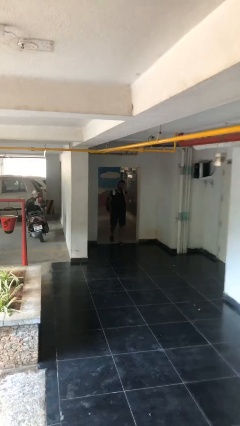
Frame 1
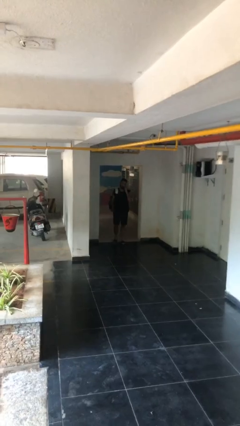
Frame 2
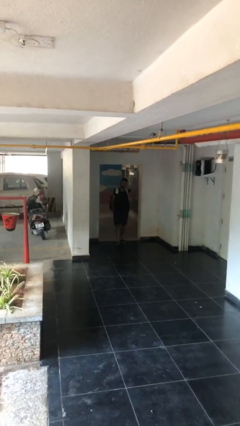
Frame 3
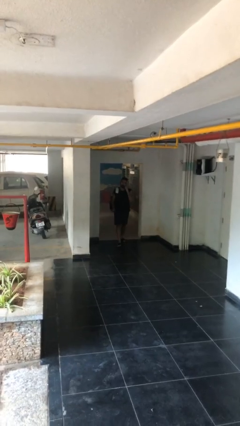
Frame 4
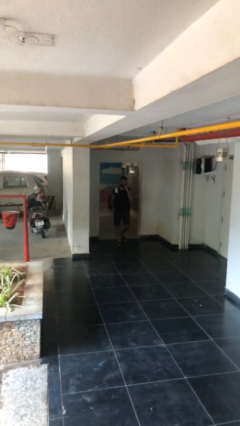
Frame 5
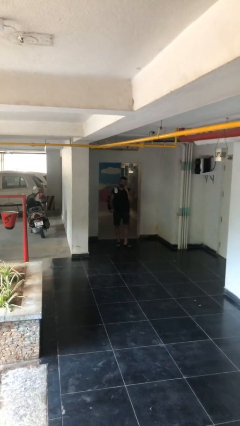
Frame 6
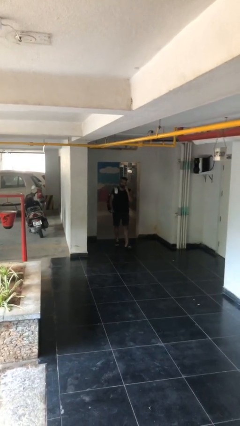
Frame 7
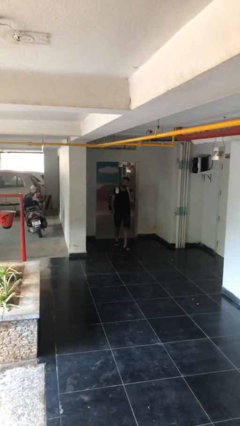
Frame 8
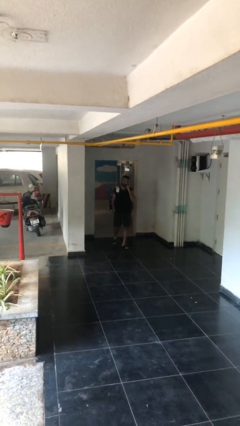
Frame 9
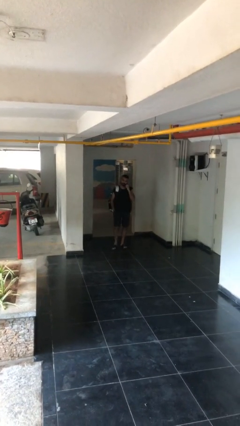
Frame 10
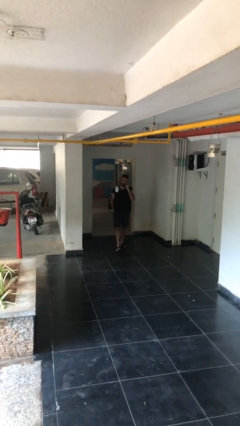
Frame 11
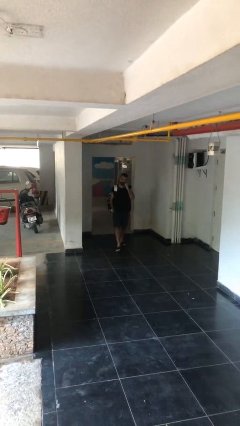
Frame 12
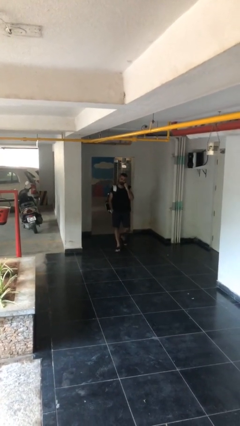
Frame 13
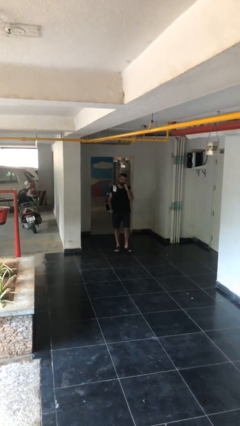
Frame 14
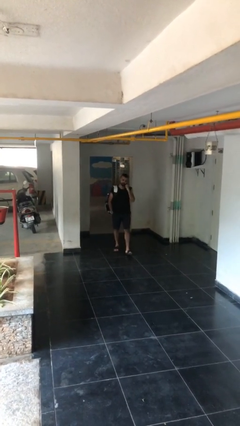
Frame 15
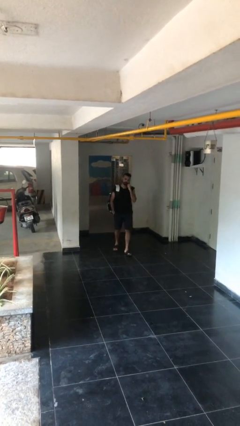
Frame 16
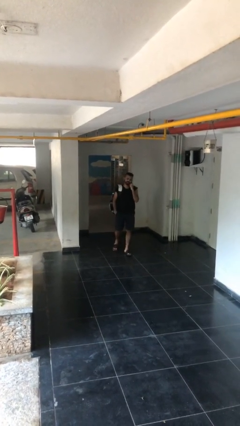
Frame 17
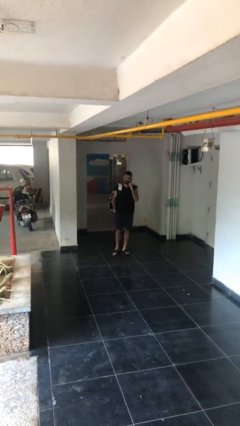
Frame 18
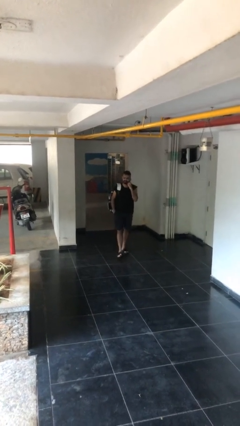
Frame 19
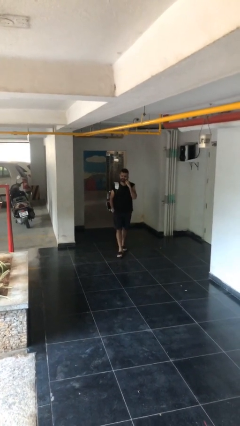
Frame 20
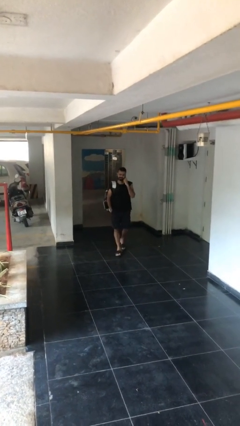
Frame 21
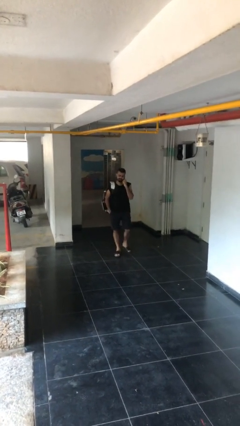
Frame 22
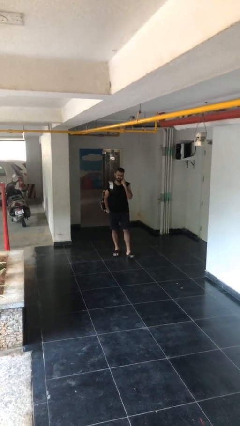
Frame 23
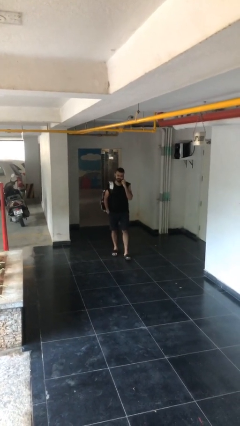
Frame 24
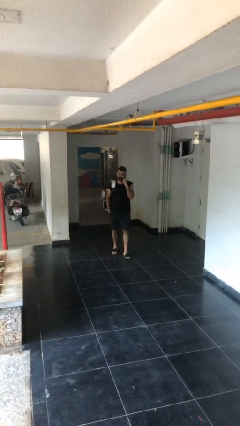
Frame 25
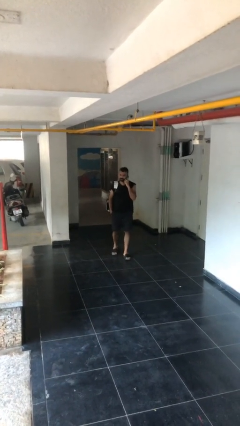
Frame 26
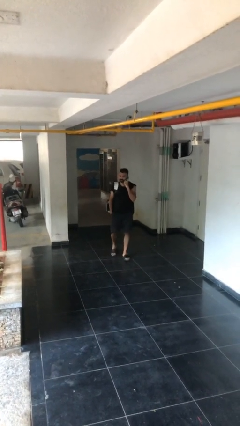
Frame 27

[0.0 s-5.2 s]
person enters scene through structure

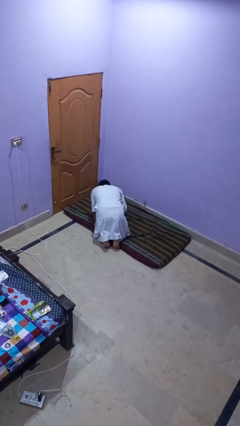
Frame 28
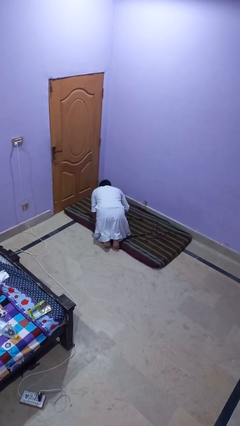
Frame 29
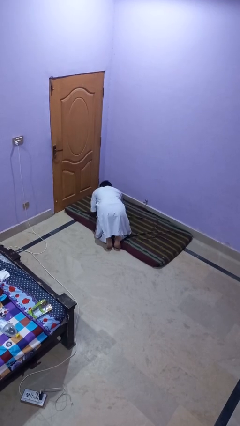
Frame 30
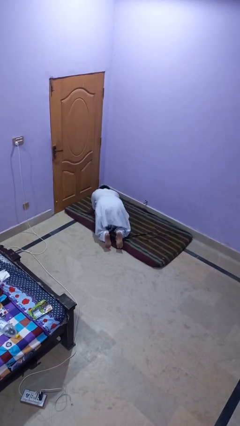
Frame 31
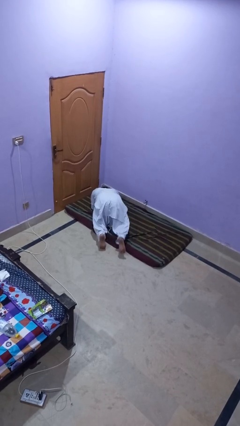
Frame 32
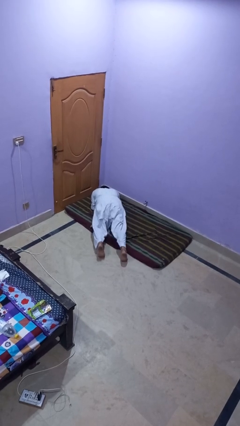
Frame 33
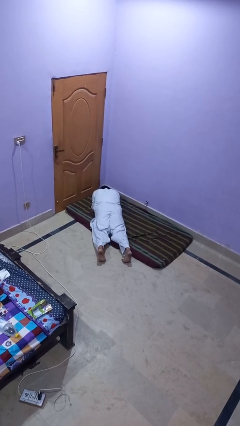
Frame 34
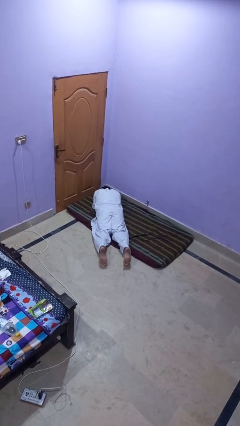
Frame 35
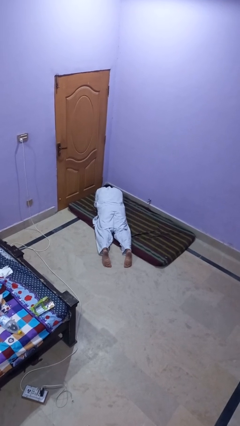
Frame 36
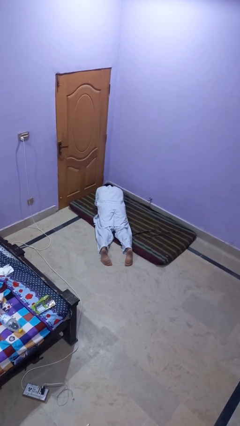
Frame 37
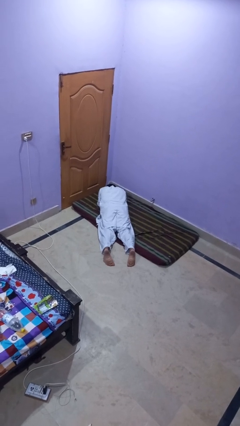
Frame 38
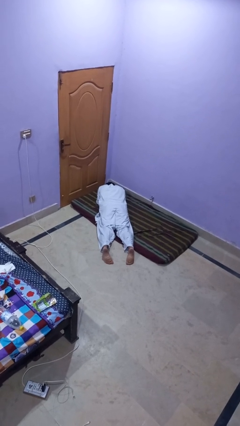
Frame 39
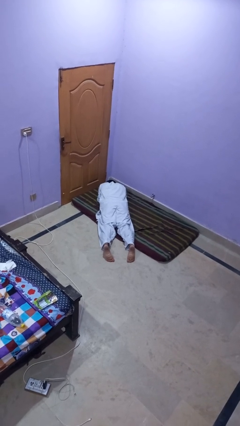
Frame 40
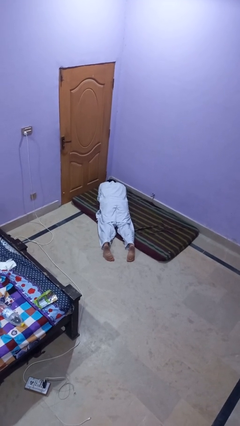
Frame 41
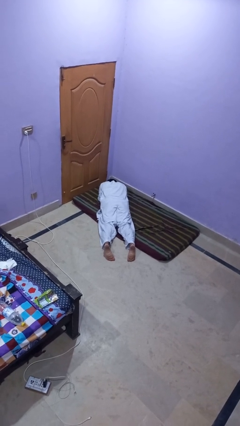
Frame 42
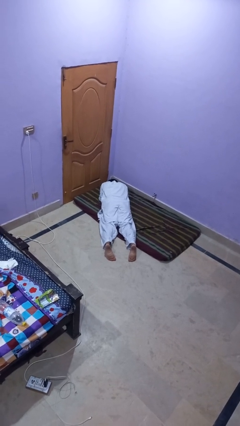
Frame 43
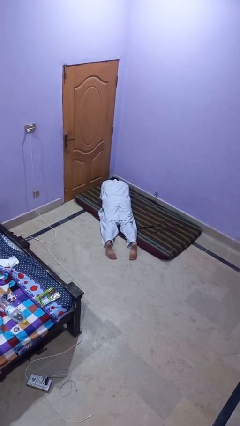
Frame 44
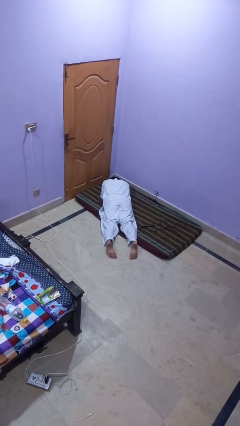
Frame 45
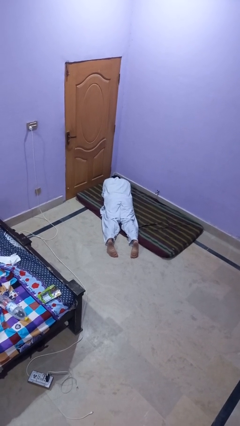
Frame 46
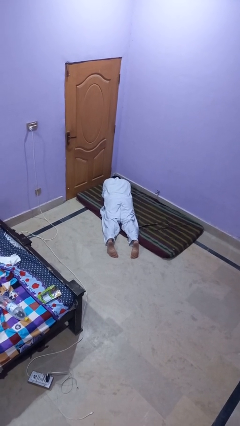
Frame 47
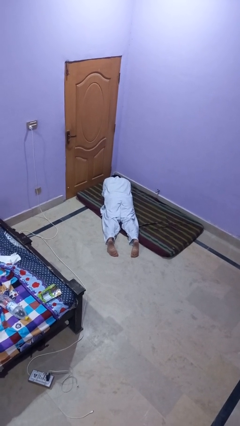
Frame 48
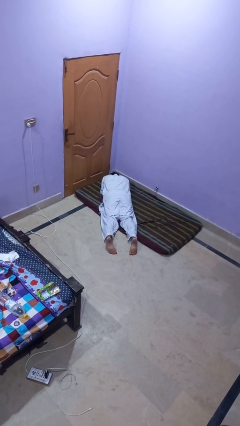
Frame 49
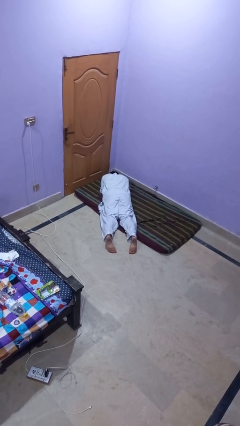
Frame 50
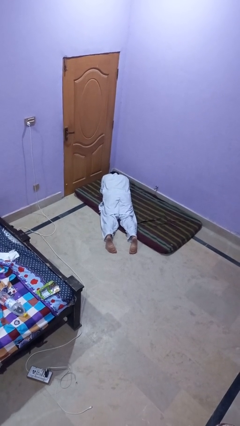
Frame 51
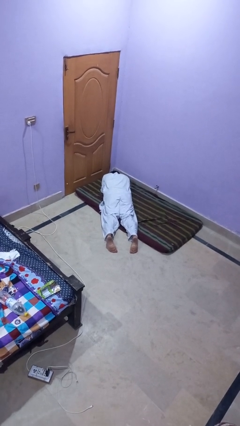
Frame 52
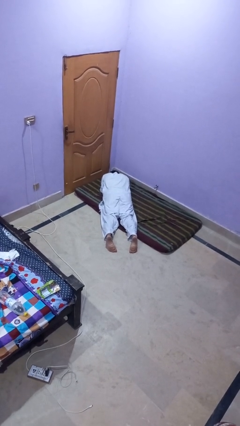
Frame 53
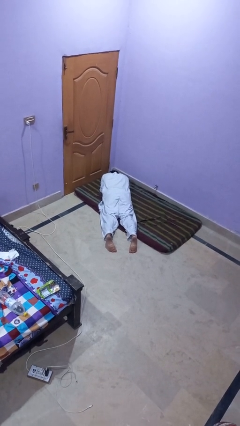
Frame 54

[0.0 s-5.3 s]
person lies down on floor

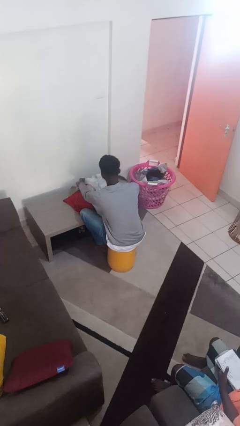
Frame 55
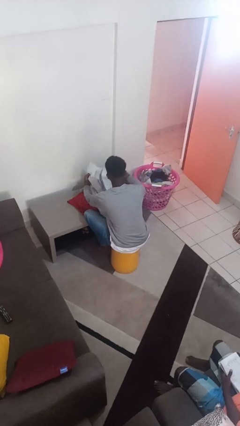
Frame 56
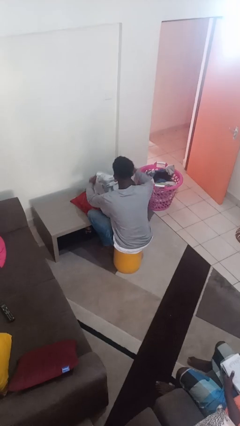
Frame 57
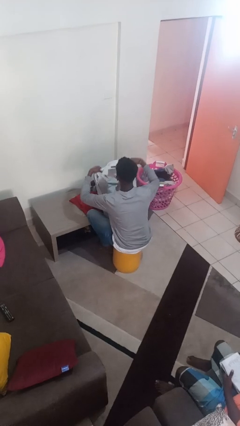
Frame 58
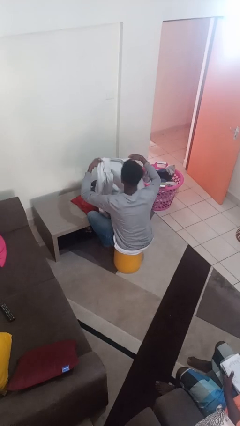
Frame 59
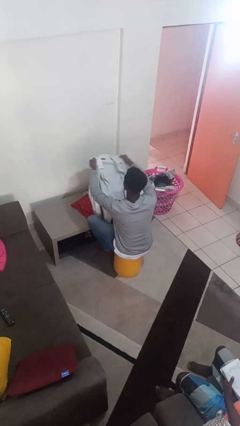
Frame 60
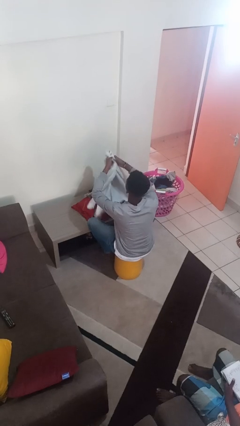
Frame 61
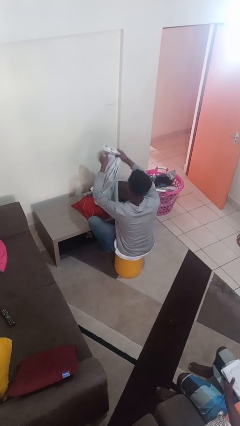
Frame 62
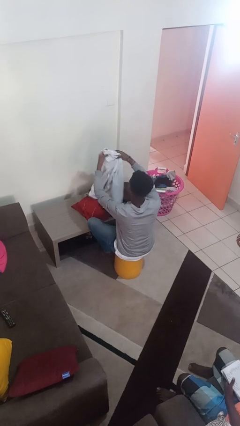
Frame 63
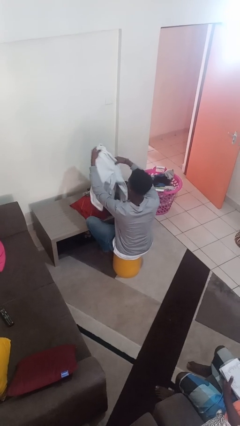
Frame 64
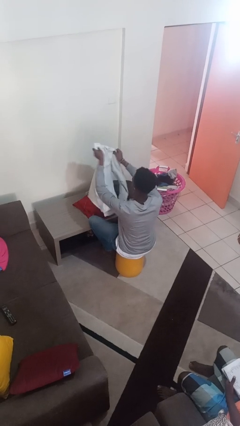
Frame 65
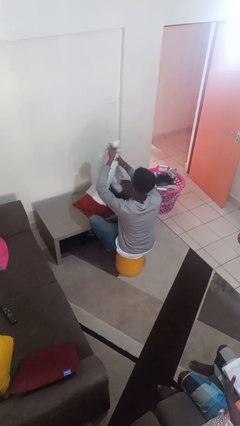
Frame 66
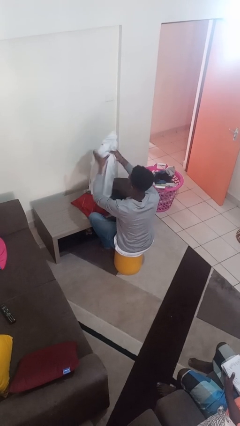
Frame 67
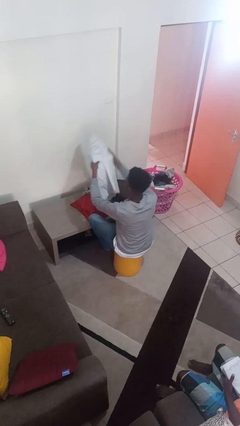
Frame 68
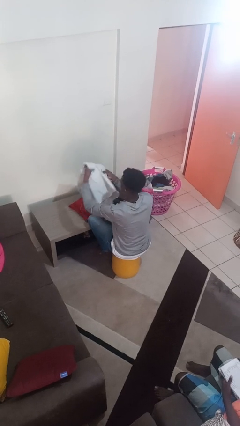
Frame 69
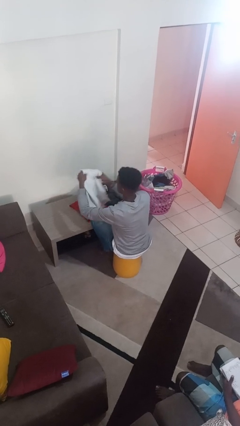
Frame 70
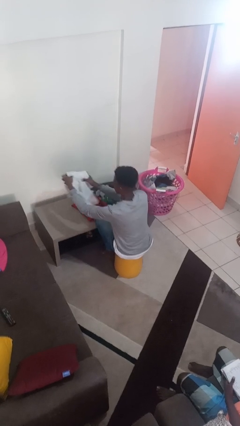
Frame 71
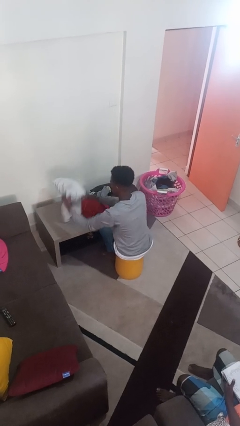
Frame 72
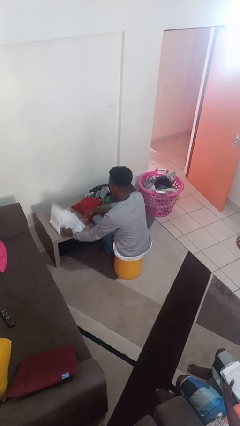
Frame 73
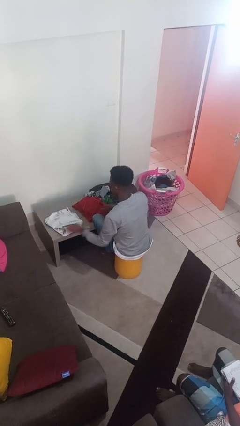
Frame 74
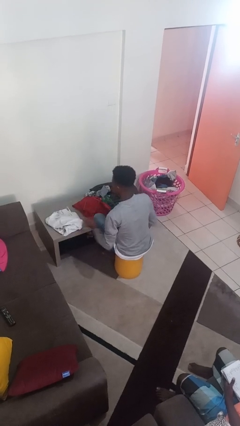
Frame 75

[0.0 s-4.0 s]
person folds shirt

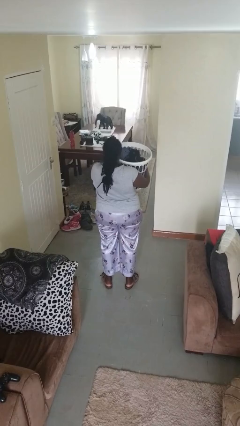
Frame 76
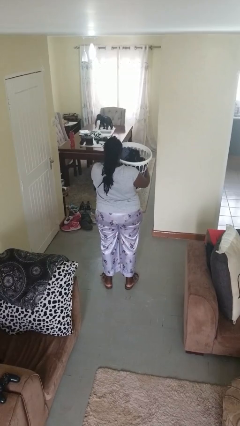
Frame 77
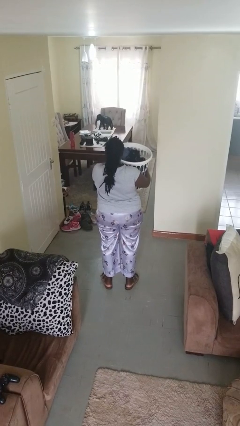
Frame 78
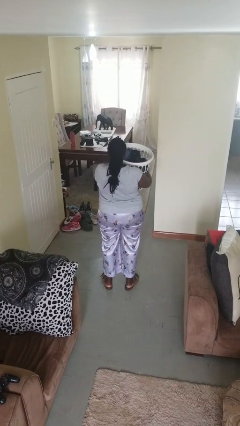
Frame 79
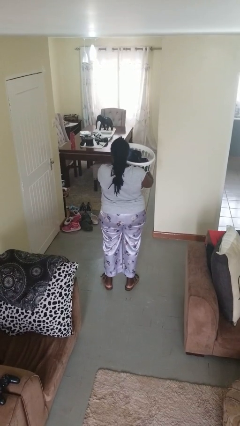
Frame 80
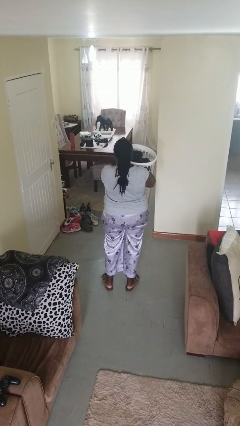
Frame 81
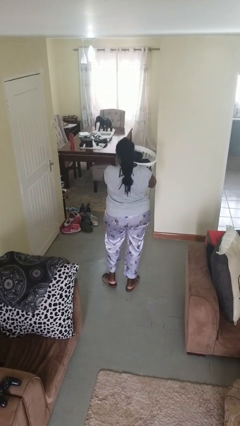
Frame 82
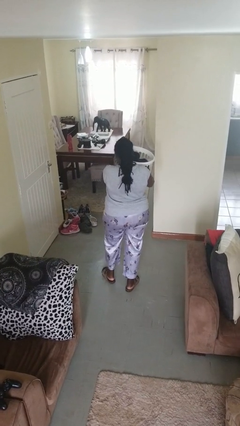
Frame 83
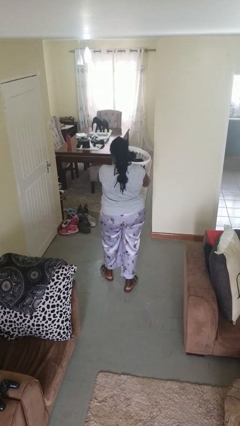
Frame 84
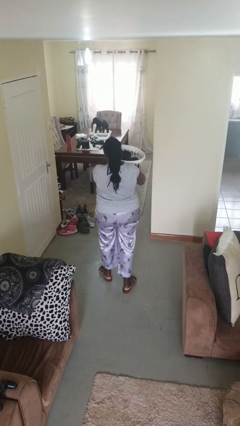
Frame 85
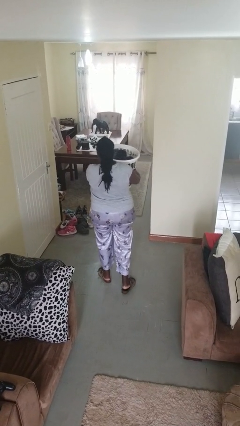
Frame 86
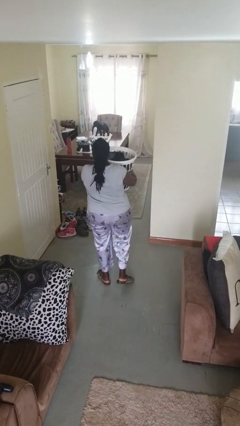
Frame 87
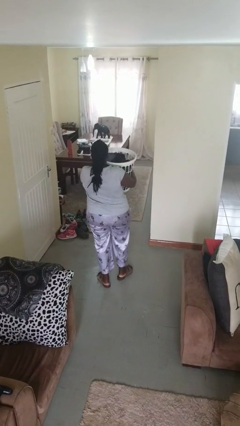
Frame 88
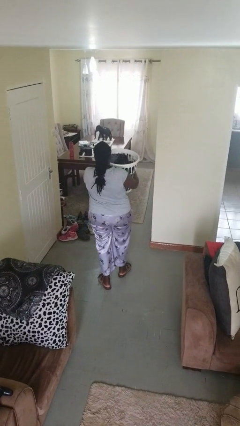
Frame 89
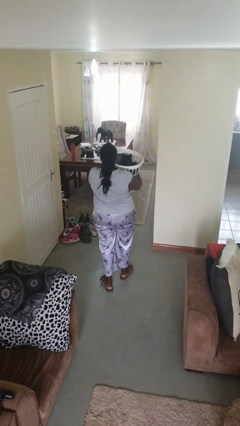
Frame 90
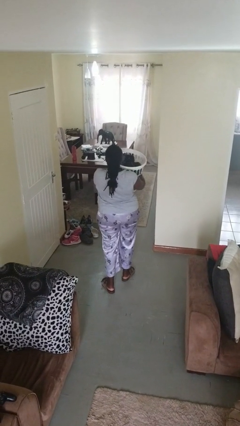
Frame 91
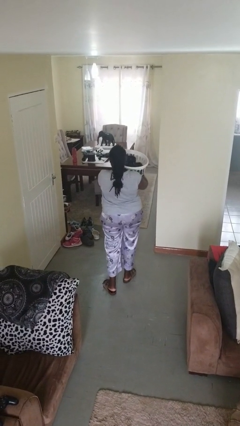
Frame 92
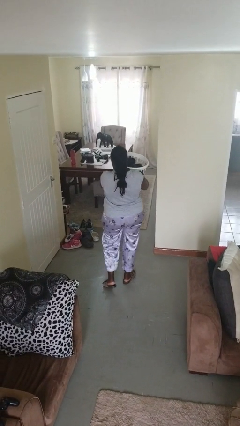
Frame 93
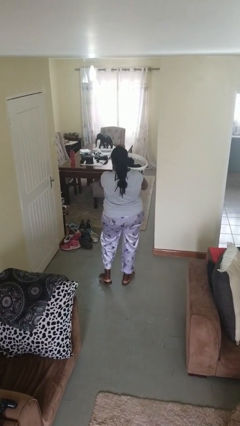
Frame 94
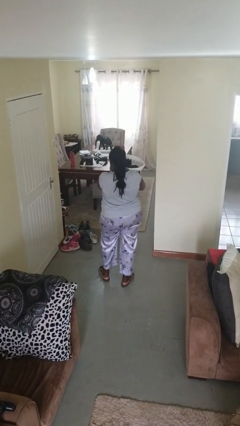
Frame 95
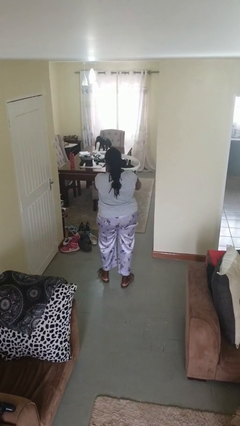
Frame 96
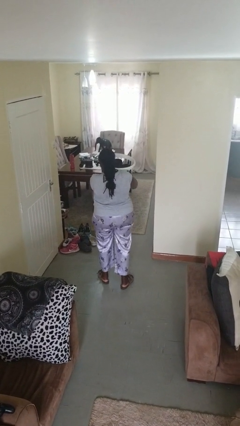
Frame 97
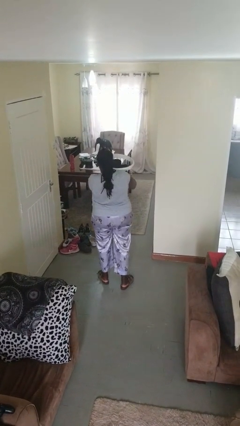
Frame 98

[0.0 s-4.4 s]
person carries laundry basket
